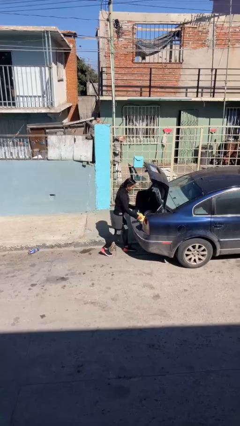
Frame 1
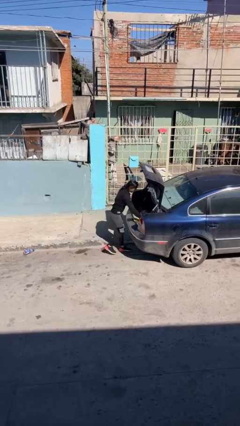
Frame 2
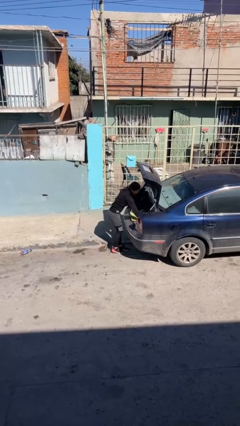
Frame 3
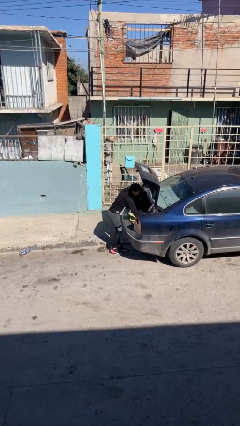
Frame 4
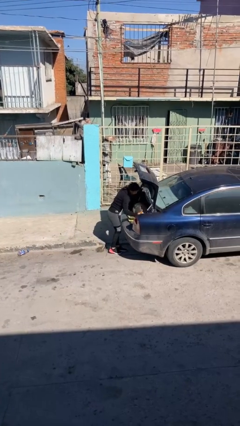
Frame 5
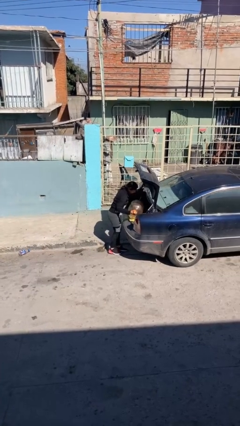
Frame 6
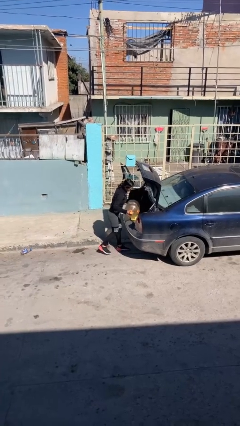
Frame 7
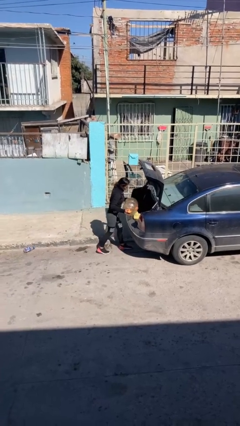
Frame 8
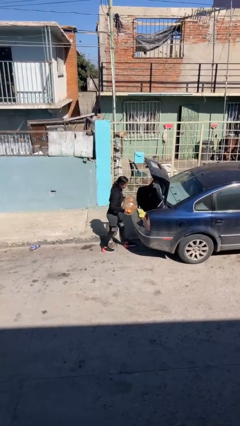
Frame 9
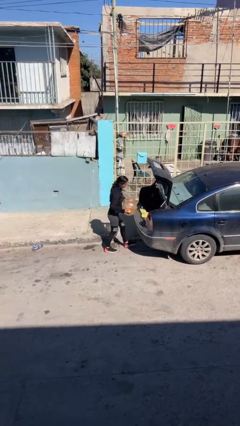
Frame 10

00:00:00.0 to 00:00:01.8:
person unloads car

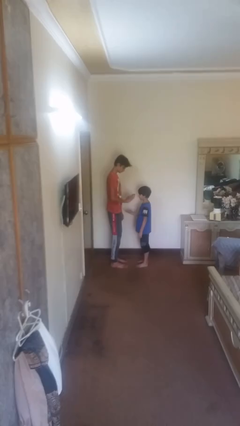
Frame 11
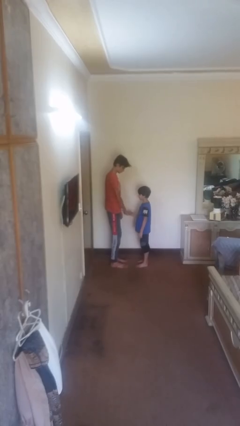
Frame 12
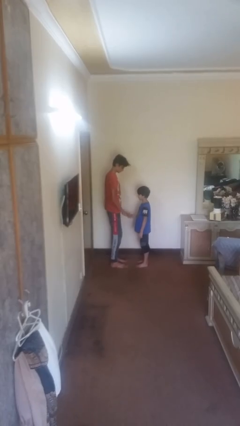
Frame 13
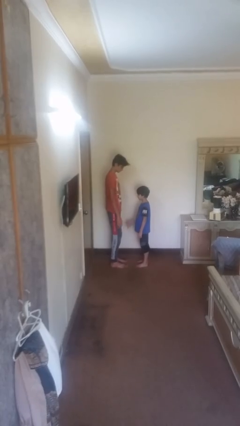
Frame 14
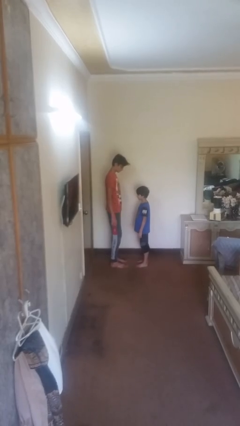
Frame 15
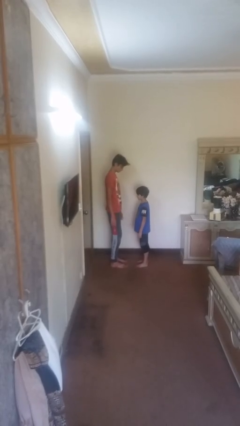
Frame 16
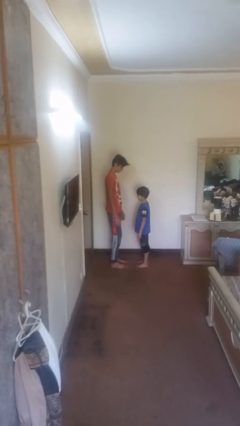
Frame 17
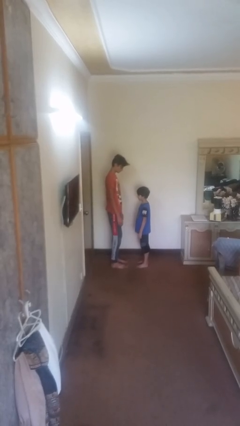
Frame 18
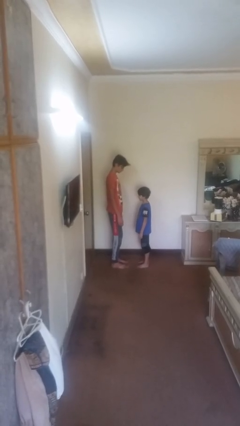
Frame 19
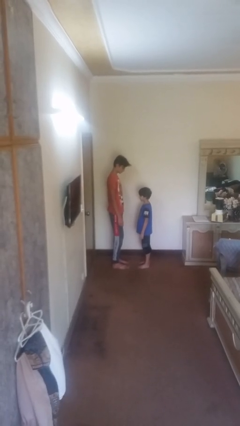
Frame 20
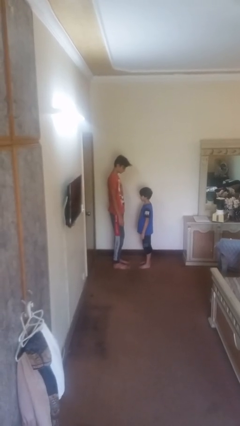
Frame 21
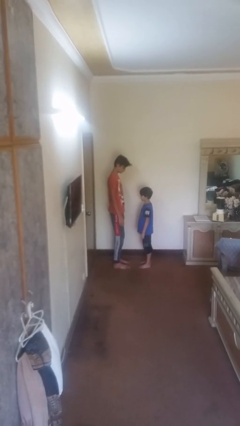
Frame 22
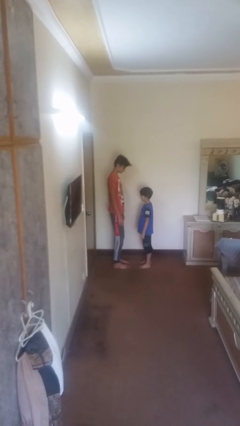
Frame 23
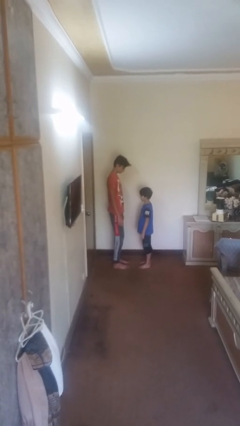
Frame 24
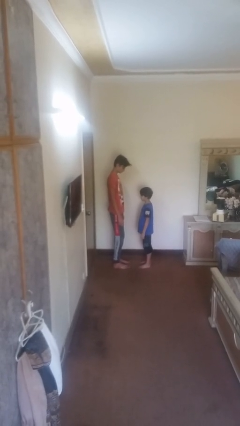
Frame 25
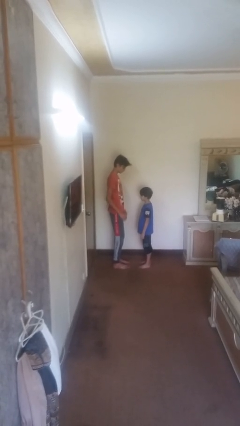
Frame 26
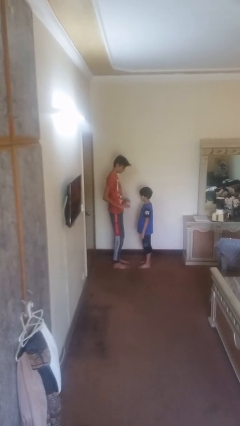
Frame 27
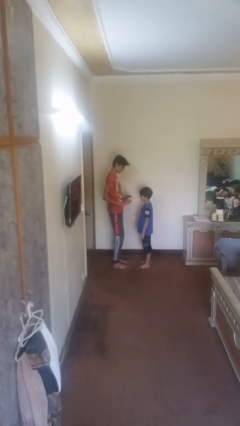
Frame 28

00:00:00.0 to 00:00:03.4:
person highfives hand

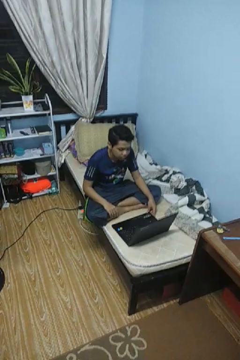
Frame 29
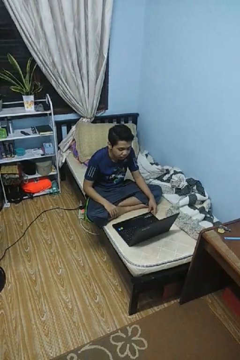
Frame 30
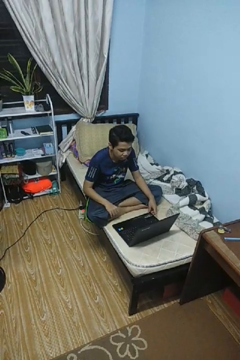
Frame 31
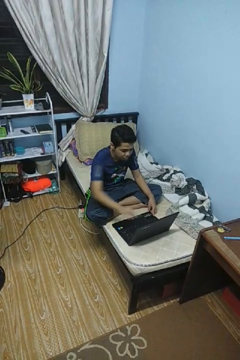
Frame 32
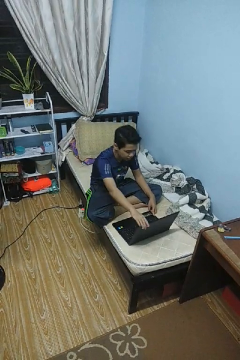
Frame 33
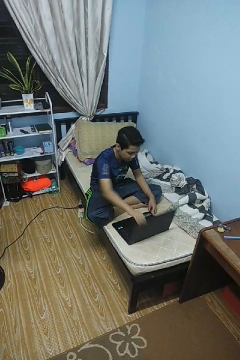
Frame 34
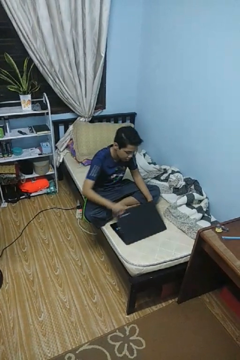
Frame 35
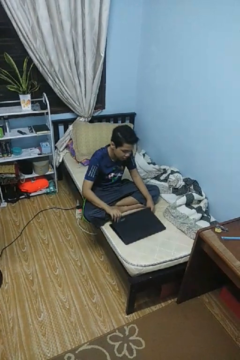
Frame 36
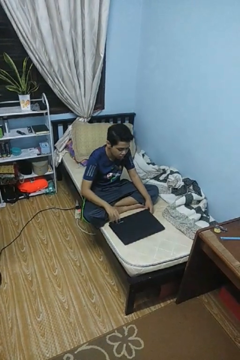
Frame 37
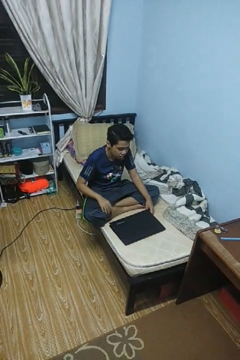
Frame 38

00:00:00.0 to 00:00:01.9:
person closes laptop

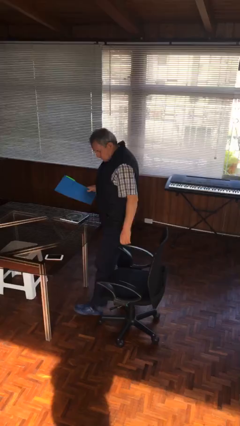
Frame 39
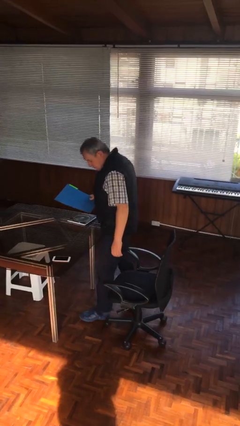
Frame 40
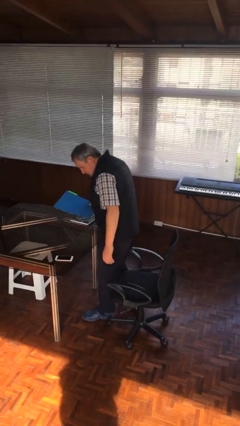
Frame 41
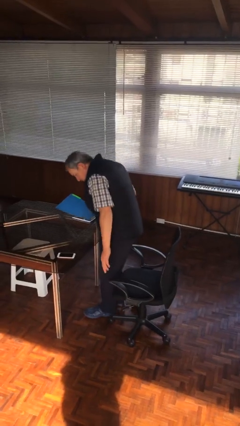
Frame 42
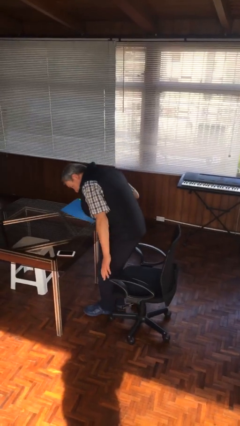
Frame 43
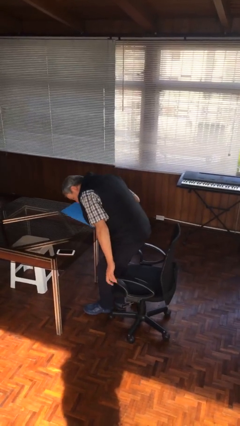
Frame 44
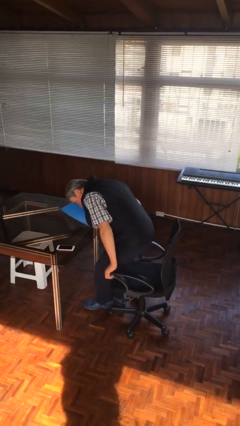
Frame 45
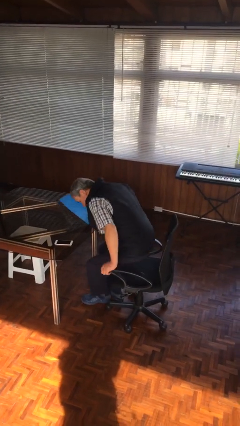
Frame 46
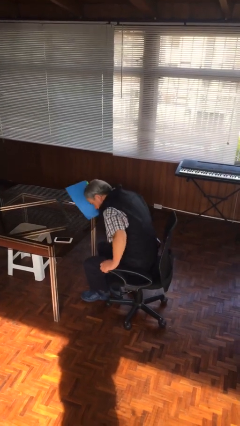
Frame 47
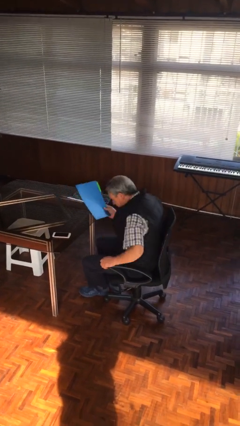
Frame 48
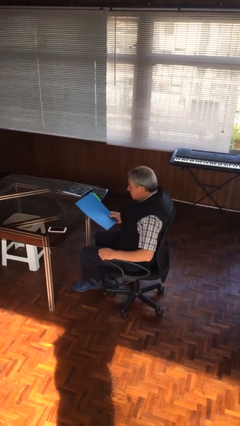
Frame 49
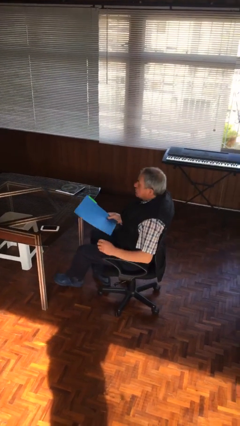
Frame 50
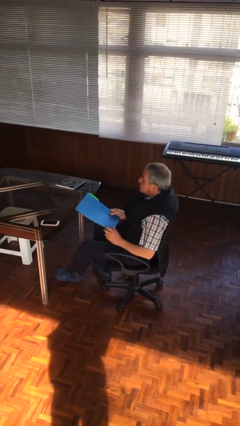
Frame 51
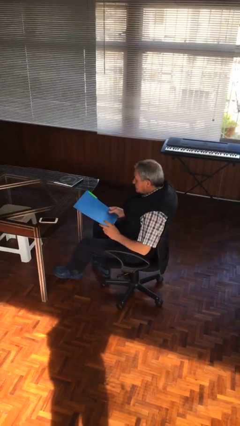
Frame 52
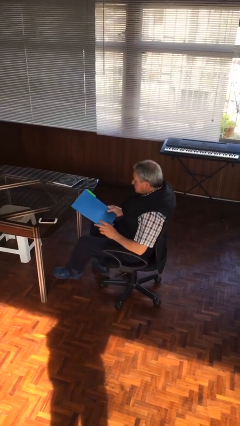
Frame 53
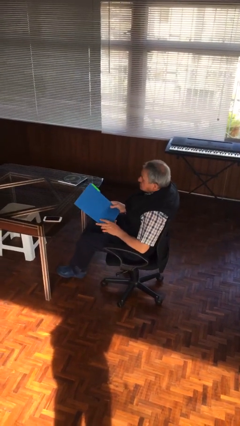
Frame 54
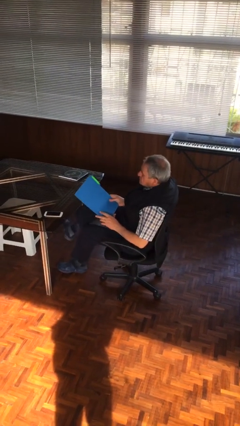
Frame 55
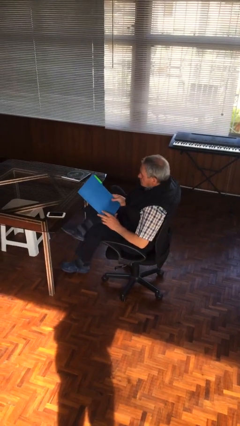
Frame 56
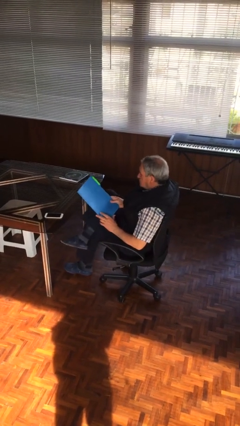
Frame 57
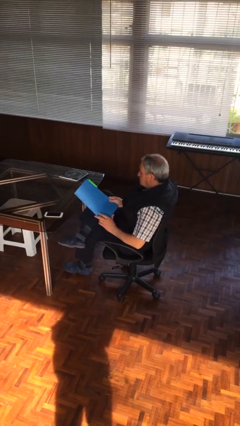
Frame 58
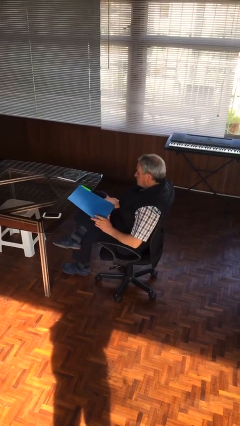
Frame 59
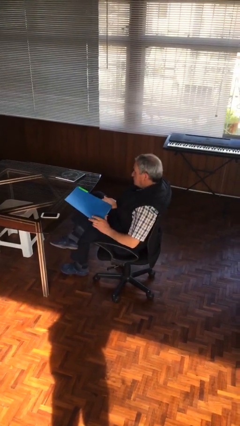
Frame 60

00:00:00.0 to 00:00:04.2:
person sits down

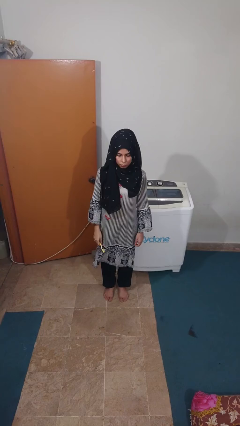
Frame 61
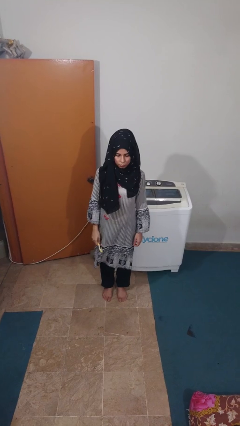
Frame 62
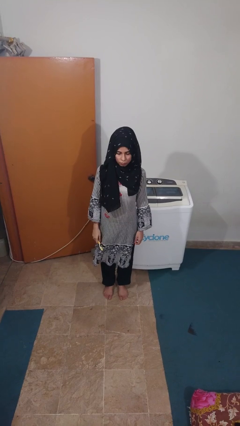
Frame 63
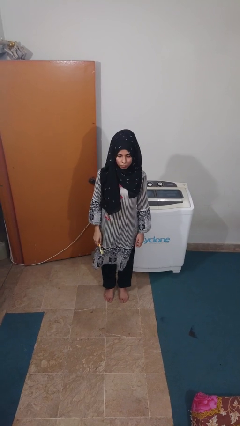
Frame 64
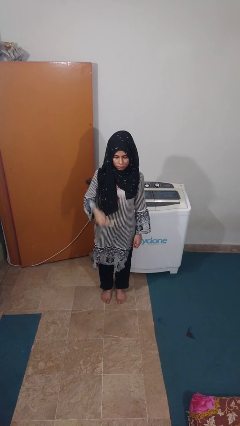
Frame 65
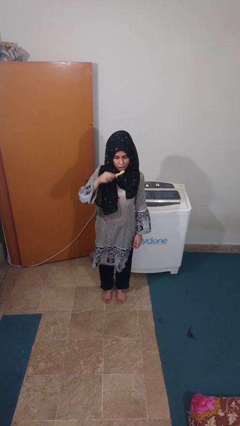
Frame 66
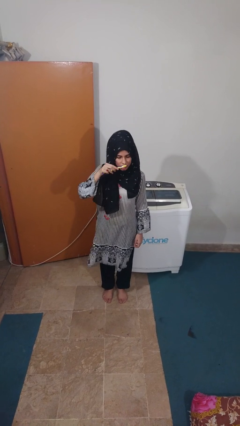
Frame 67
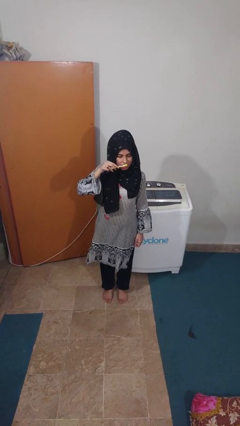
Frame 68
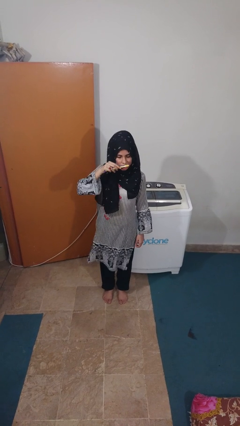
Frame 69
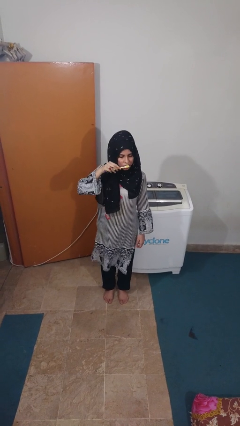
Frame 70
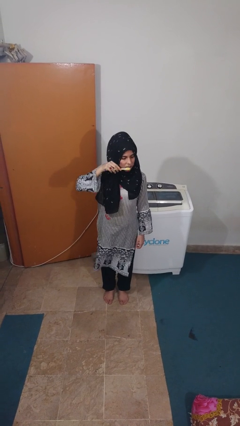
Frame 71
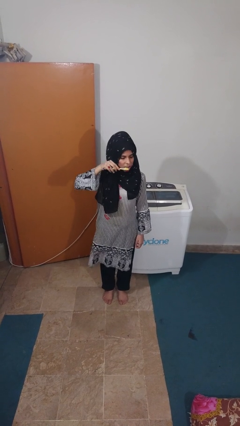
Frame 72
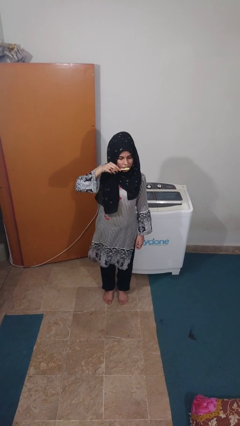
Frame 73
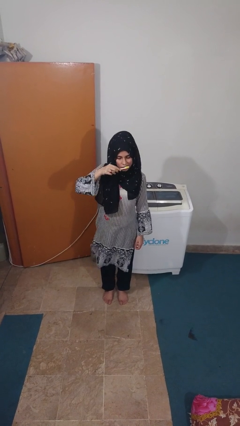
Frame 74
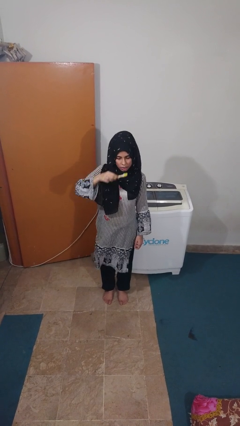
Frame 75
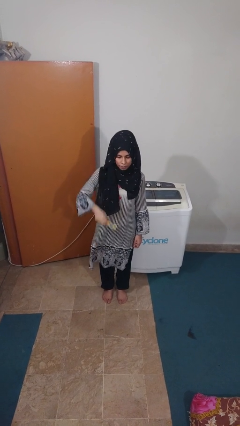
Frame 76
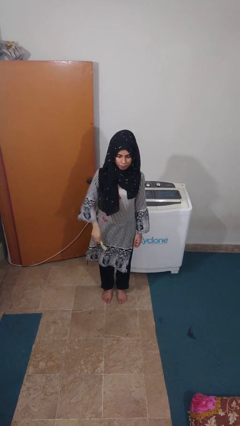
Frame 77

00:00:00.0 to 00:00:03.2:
person brushes teeth

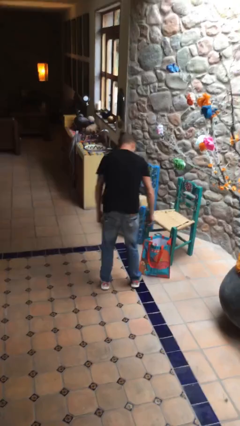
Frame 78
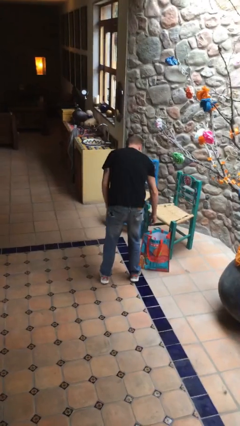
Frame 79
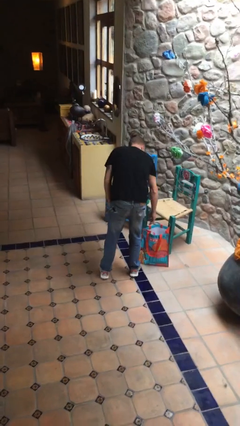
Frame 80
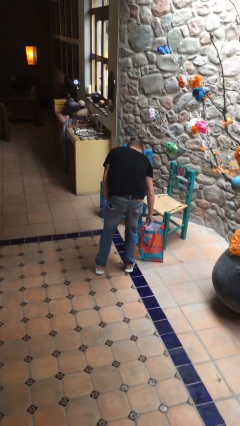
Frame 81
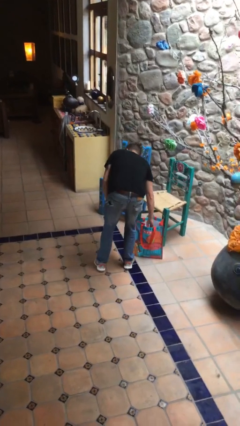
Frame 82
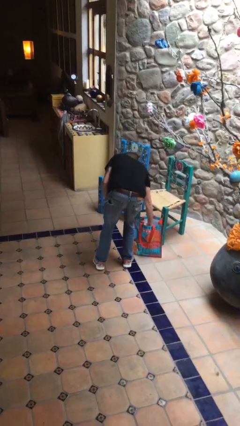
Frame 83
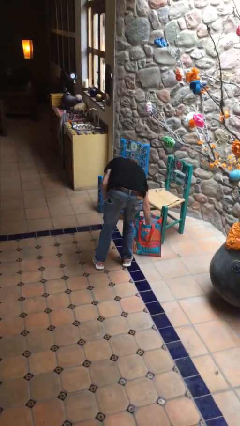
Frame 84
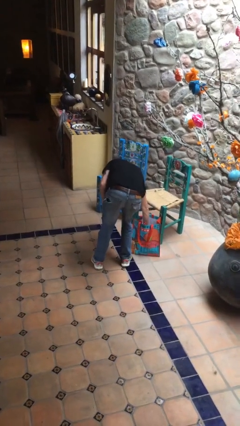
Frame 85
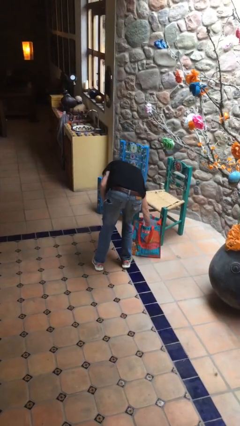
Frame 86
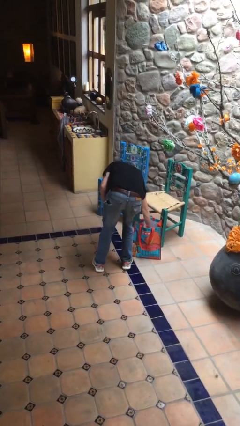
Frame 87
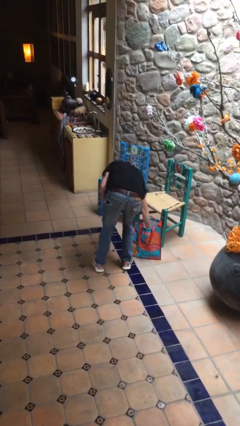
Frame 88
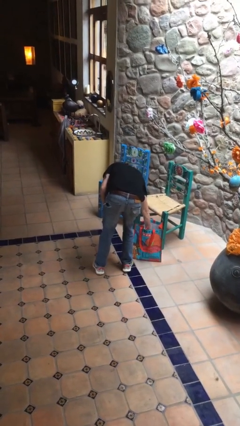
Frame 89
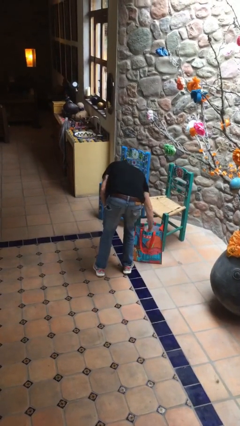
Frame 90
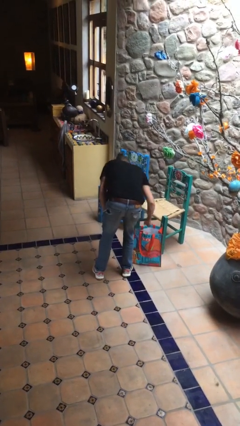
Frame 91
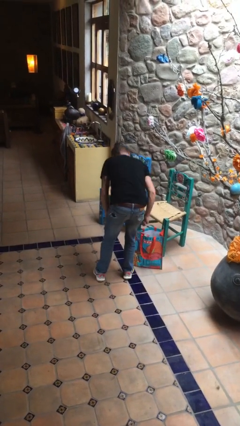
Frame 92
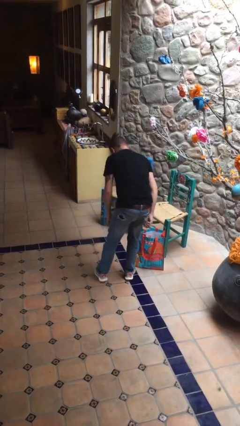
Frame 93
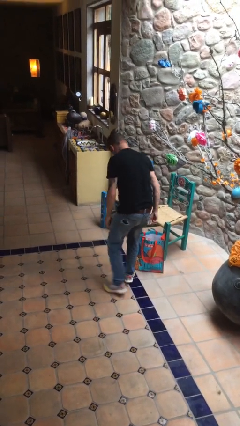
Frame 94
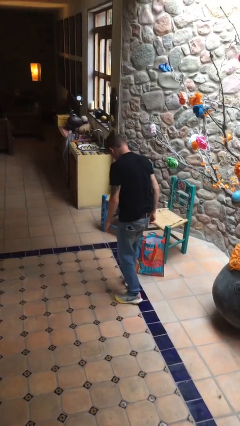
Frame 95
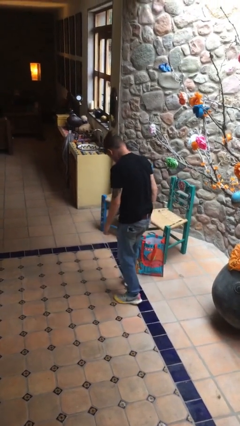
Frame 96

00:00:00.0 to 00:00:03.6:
person searches in bag
